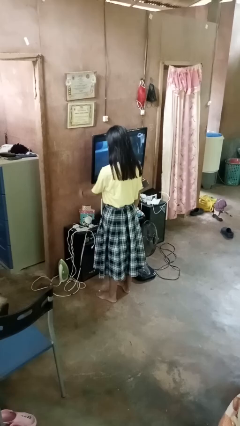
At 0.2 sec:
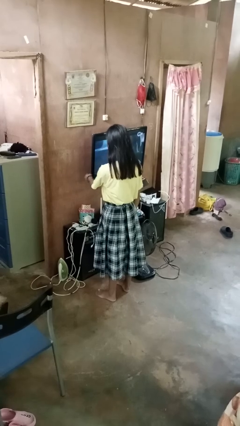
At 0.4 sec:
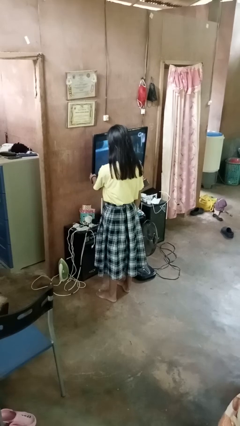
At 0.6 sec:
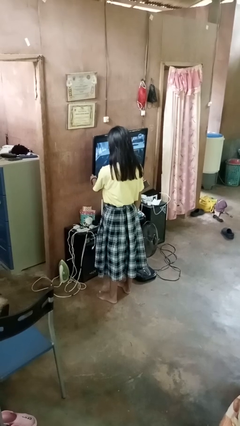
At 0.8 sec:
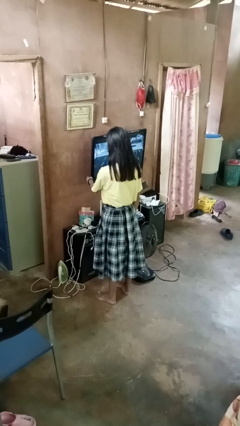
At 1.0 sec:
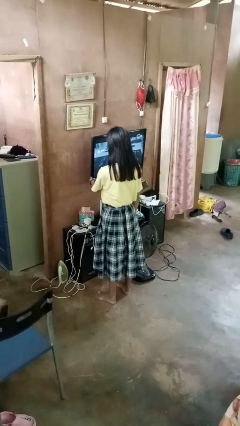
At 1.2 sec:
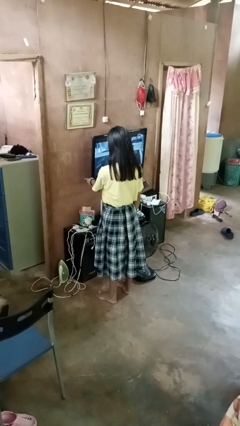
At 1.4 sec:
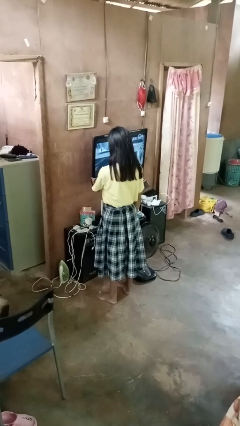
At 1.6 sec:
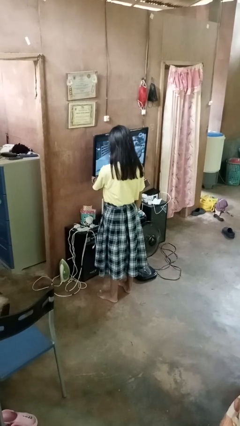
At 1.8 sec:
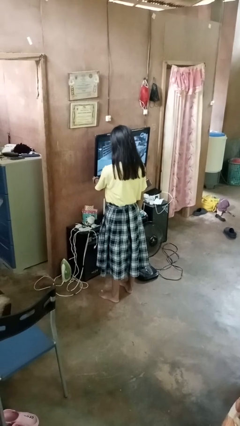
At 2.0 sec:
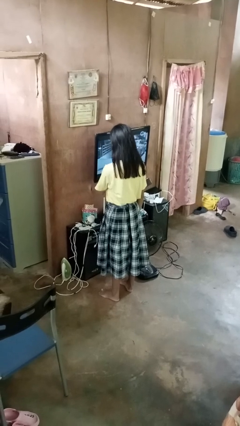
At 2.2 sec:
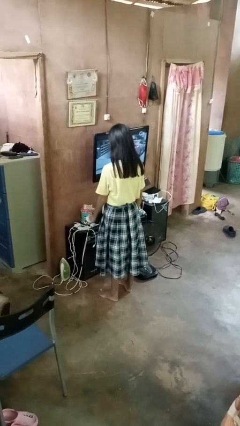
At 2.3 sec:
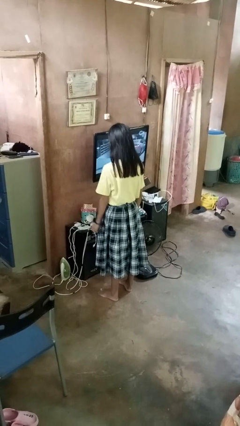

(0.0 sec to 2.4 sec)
person taps object with finger

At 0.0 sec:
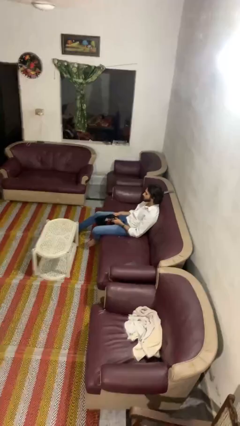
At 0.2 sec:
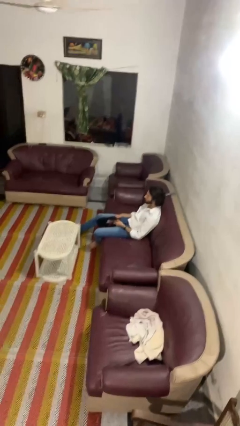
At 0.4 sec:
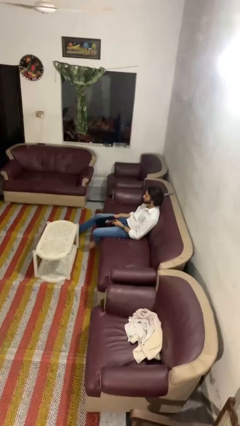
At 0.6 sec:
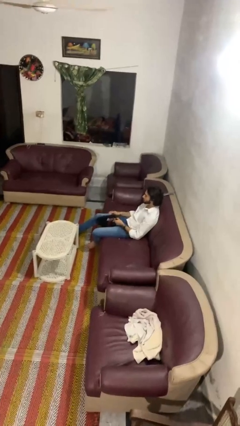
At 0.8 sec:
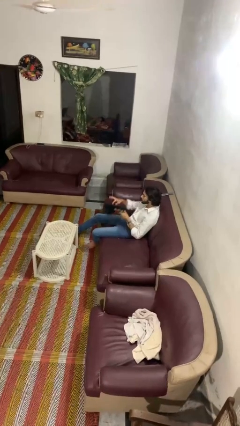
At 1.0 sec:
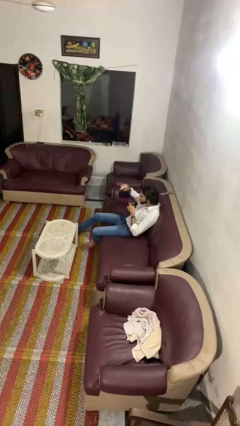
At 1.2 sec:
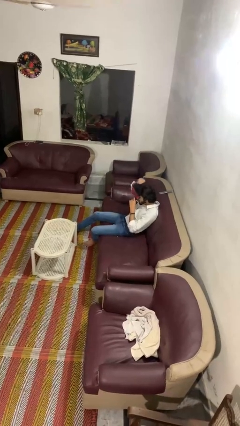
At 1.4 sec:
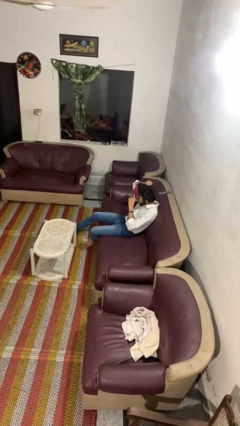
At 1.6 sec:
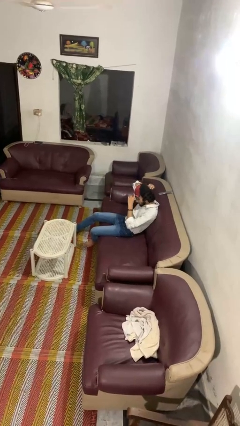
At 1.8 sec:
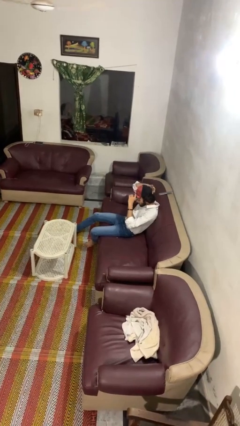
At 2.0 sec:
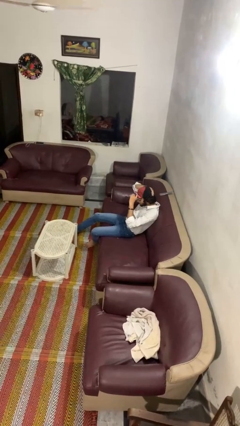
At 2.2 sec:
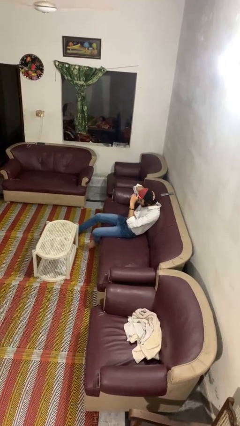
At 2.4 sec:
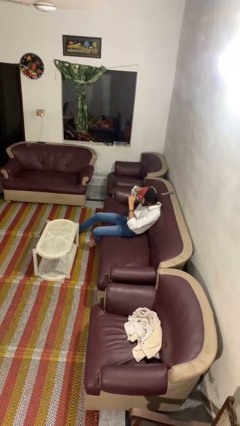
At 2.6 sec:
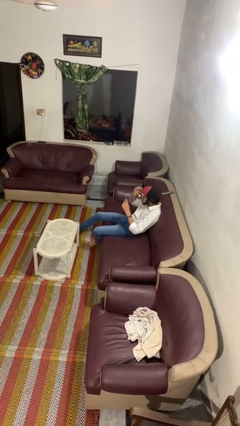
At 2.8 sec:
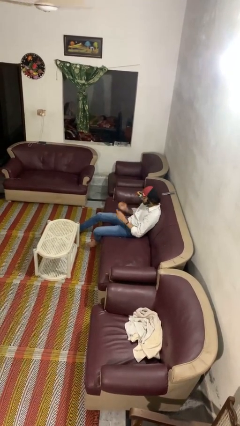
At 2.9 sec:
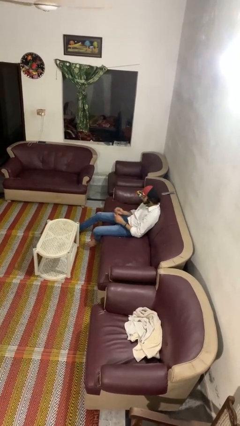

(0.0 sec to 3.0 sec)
person puts on hat

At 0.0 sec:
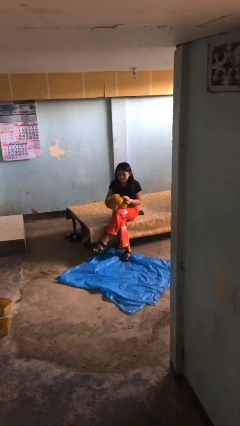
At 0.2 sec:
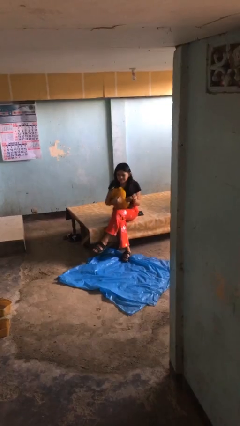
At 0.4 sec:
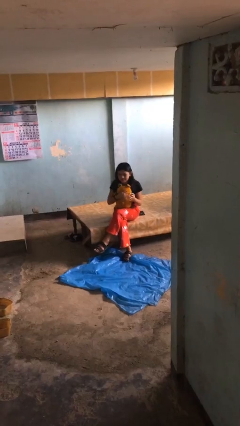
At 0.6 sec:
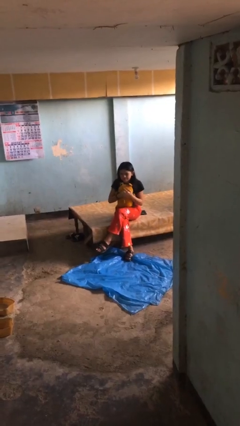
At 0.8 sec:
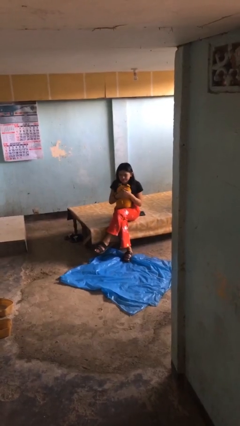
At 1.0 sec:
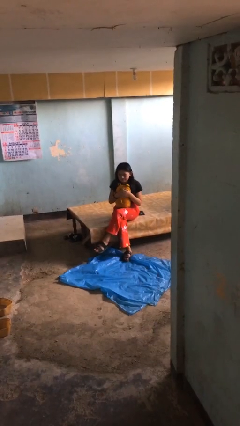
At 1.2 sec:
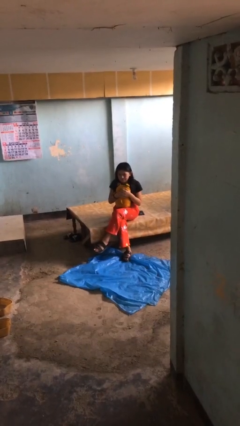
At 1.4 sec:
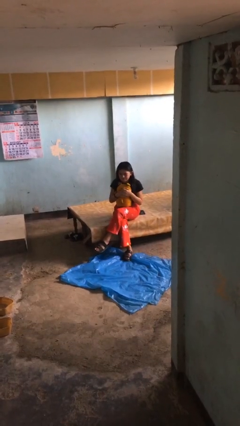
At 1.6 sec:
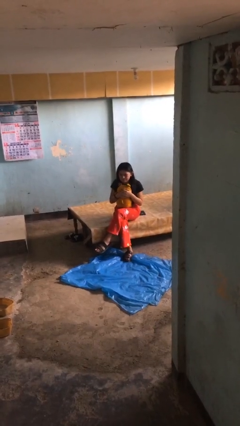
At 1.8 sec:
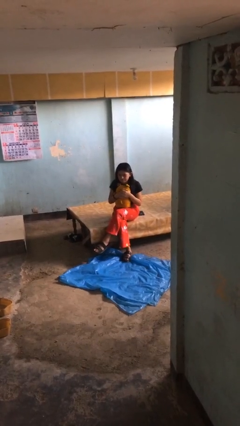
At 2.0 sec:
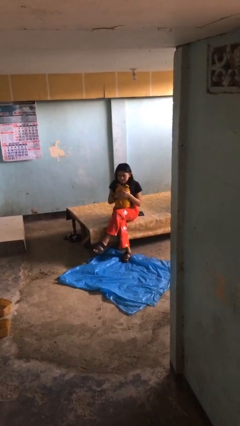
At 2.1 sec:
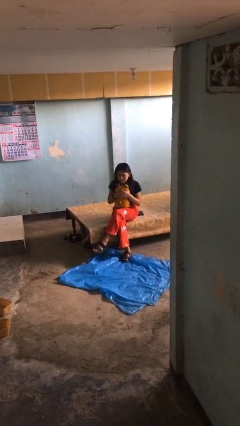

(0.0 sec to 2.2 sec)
person hugs stuffed animal

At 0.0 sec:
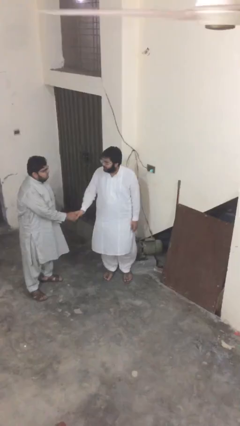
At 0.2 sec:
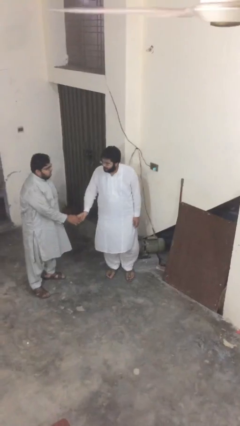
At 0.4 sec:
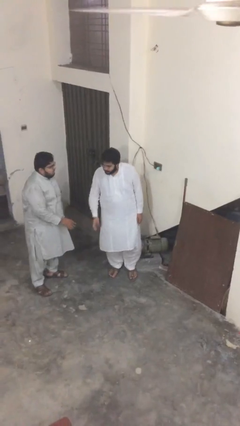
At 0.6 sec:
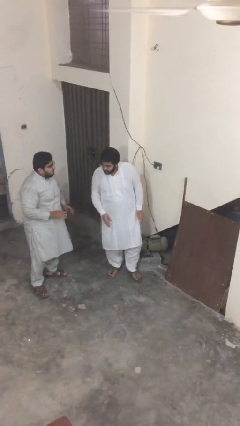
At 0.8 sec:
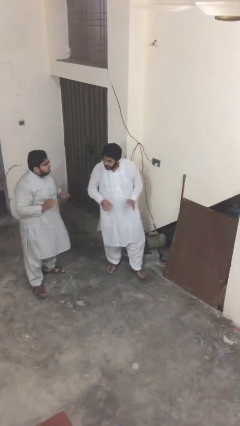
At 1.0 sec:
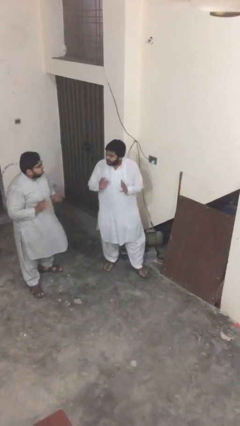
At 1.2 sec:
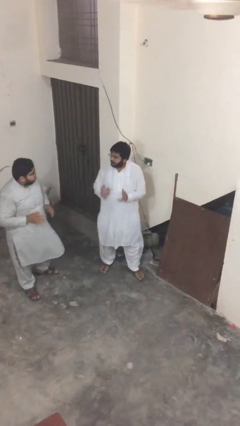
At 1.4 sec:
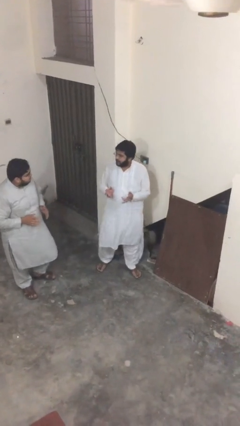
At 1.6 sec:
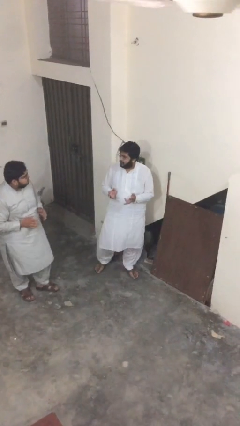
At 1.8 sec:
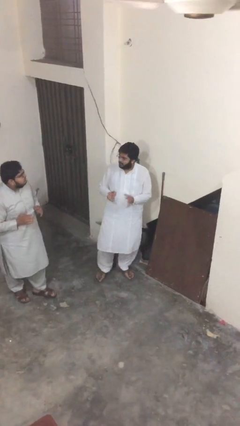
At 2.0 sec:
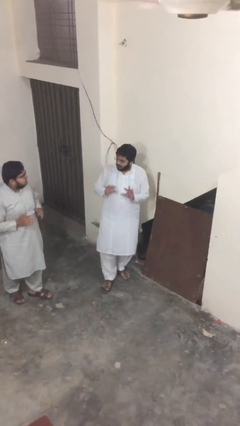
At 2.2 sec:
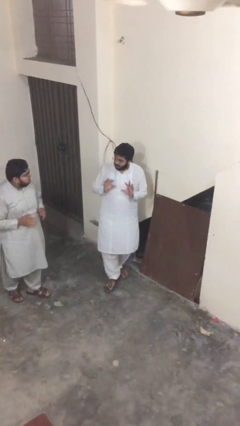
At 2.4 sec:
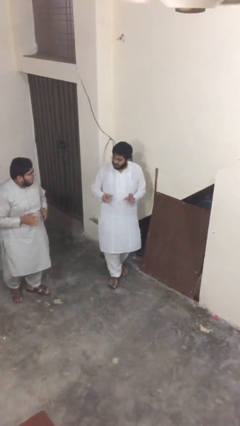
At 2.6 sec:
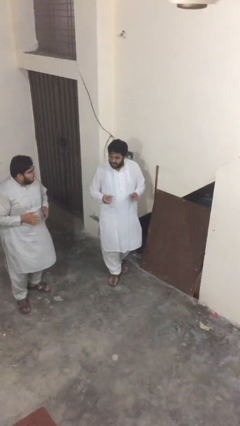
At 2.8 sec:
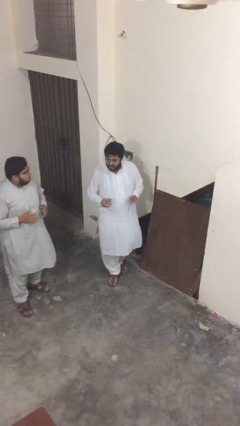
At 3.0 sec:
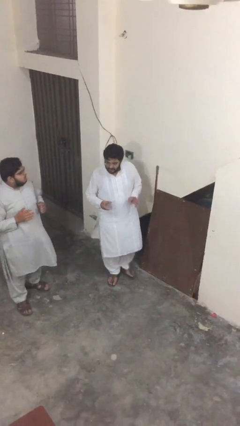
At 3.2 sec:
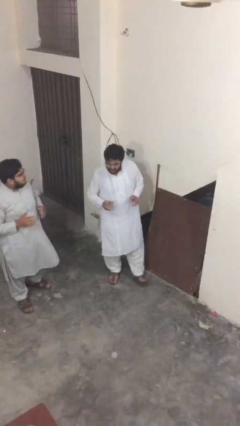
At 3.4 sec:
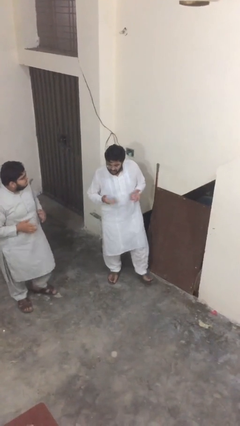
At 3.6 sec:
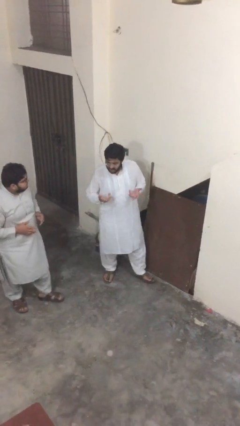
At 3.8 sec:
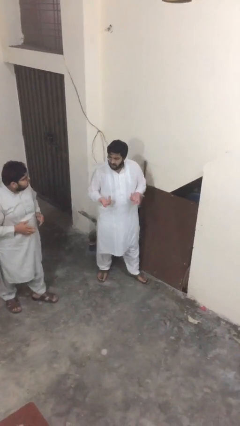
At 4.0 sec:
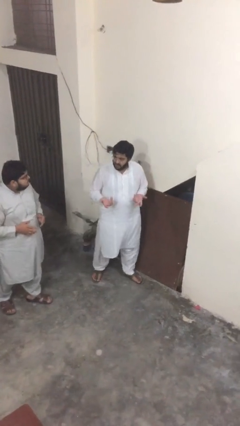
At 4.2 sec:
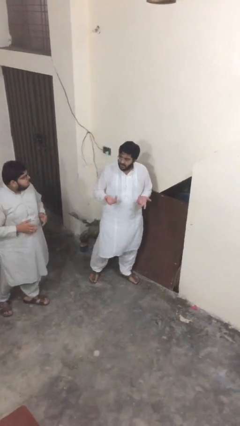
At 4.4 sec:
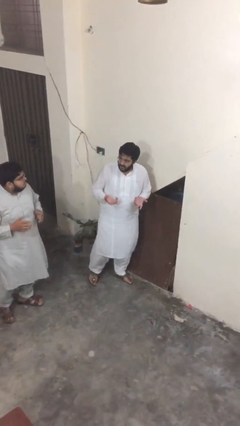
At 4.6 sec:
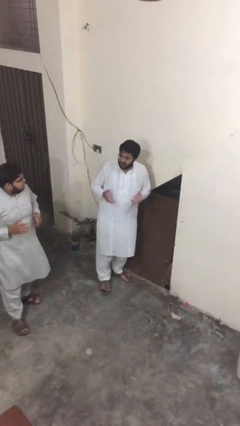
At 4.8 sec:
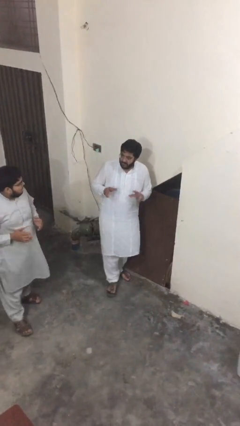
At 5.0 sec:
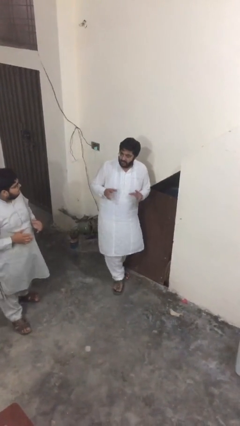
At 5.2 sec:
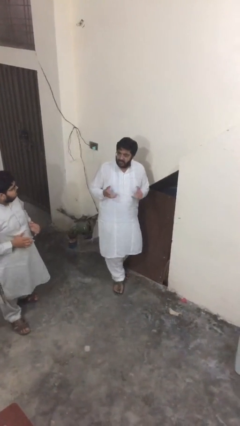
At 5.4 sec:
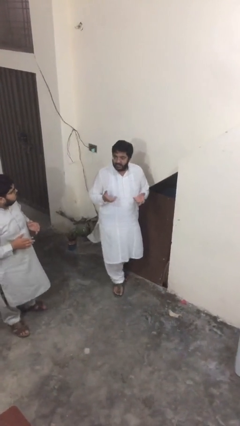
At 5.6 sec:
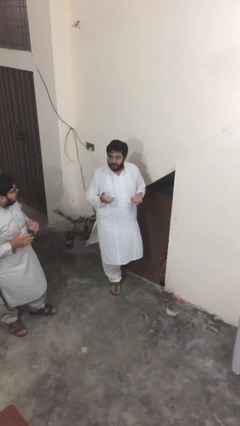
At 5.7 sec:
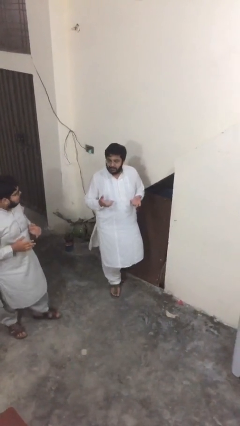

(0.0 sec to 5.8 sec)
person talks to person

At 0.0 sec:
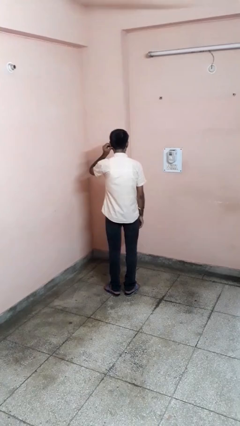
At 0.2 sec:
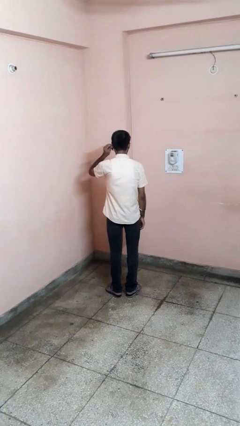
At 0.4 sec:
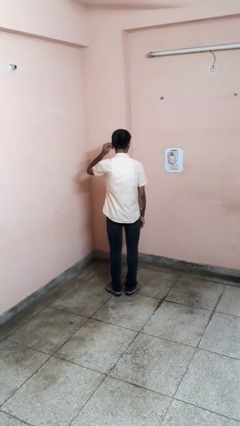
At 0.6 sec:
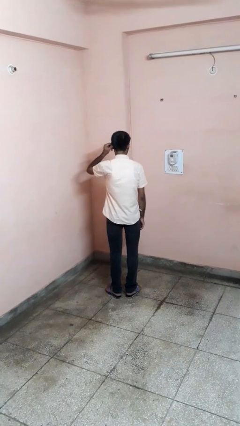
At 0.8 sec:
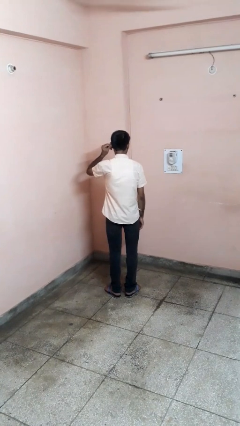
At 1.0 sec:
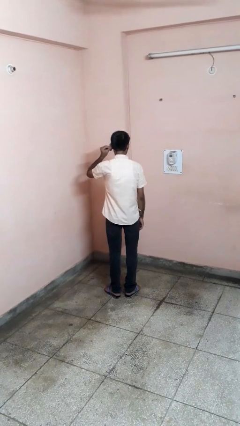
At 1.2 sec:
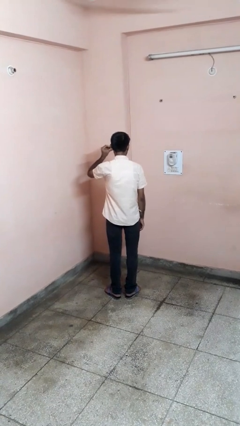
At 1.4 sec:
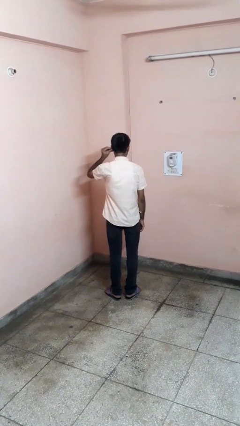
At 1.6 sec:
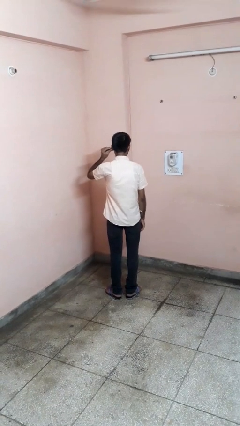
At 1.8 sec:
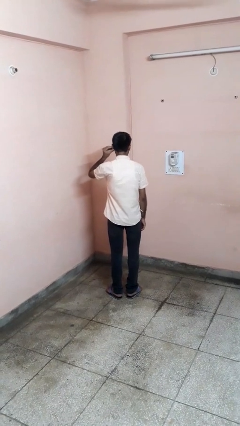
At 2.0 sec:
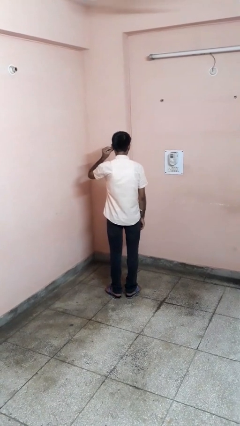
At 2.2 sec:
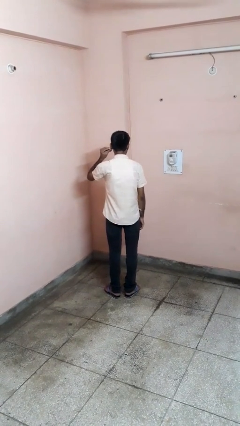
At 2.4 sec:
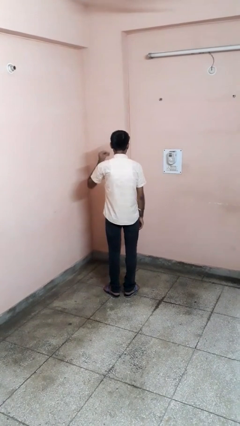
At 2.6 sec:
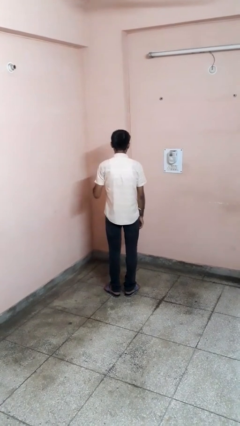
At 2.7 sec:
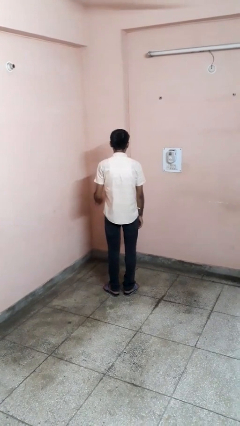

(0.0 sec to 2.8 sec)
person touches earlobe

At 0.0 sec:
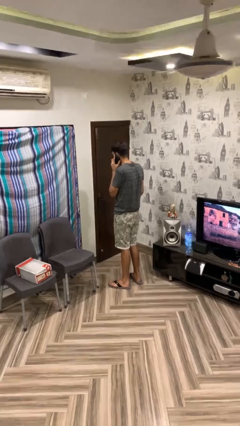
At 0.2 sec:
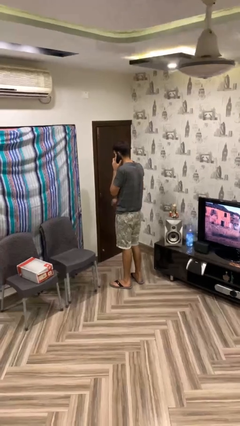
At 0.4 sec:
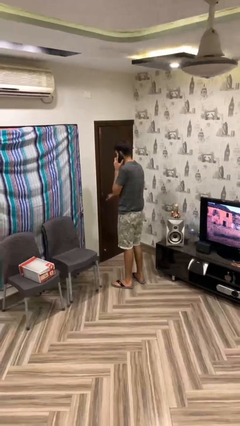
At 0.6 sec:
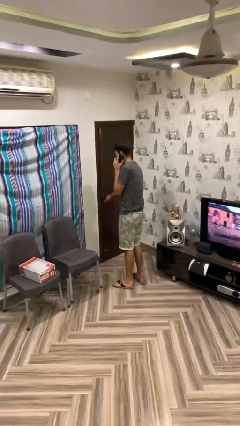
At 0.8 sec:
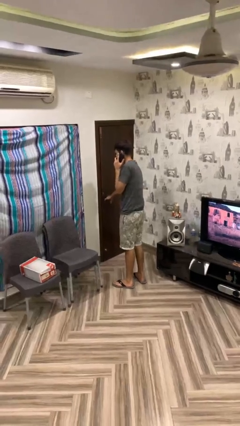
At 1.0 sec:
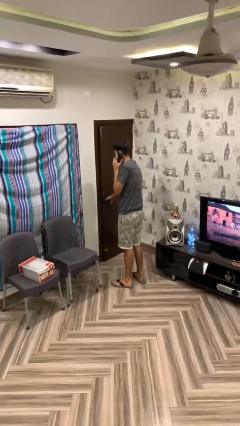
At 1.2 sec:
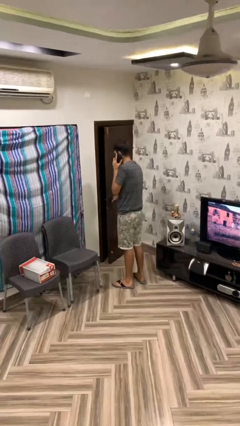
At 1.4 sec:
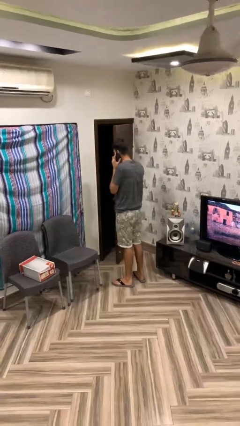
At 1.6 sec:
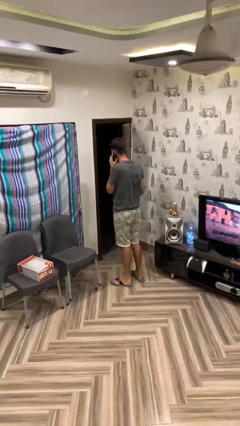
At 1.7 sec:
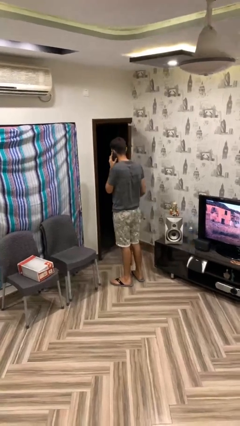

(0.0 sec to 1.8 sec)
person opens facility door
